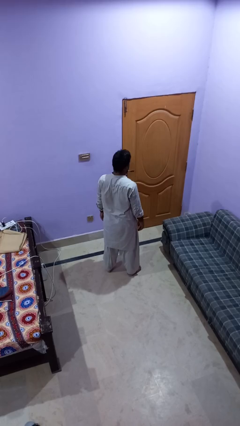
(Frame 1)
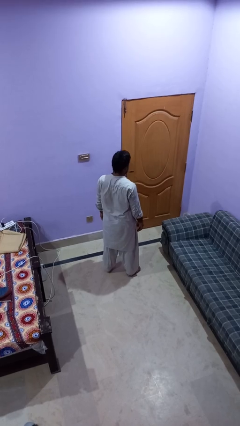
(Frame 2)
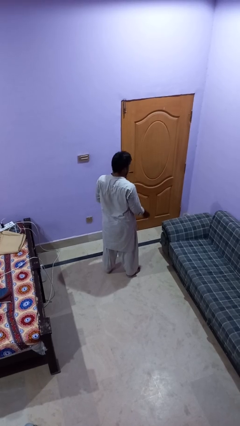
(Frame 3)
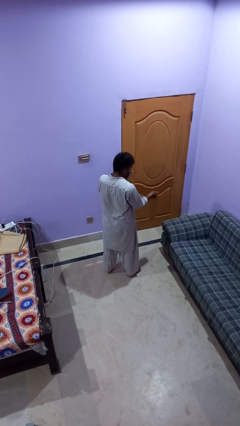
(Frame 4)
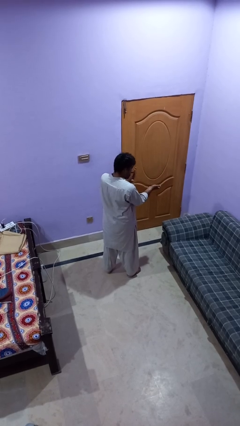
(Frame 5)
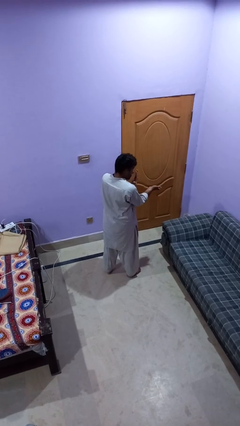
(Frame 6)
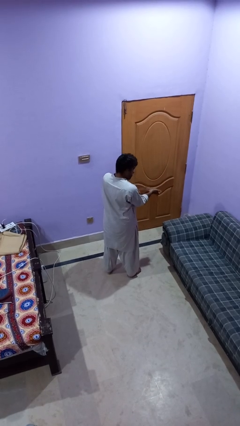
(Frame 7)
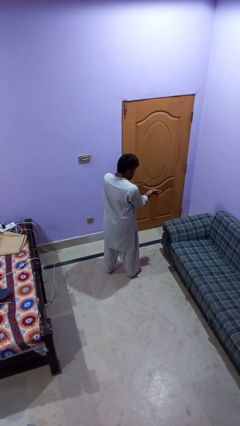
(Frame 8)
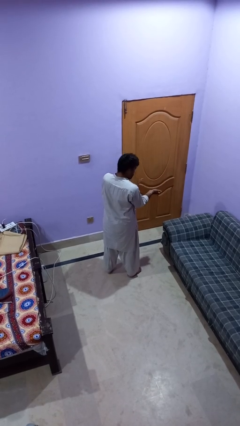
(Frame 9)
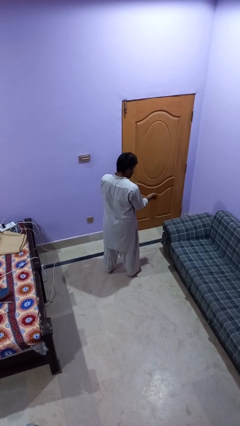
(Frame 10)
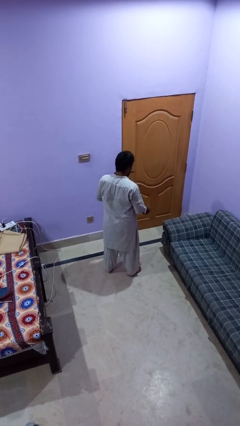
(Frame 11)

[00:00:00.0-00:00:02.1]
person swats bug

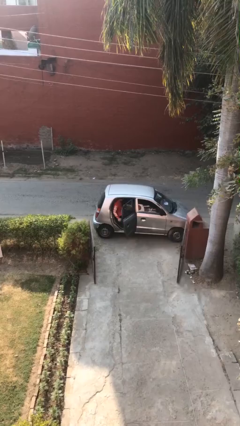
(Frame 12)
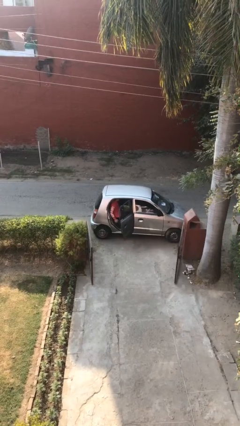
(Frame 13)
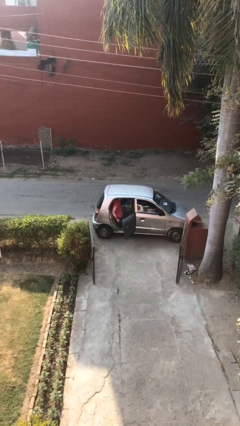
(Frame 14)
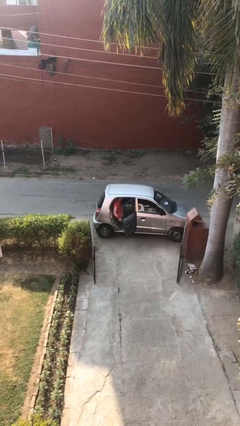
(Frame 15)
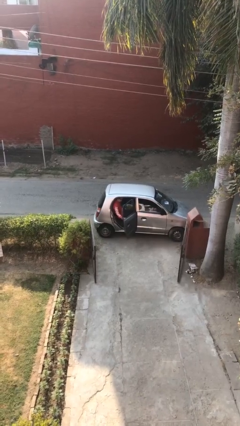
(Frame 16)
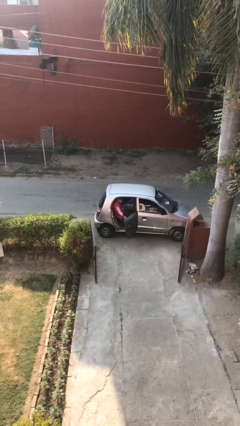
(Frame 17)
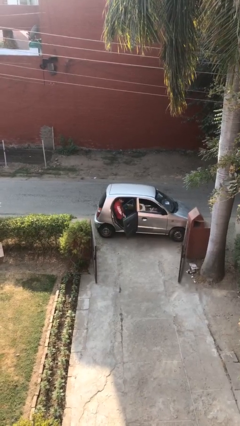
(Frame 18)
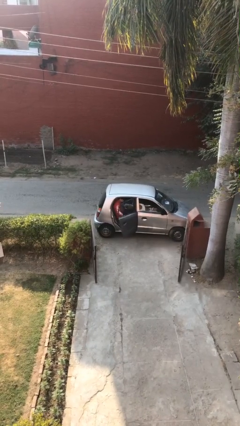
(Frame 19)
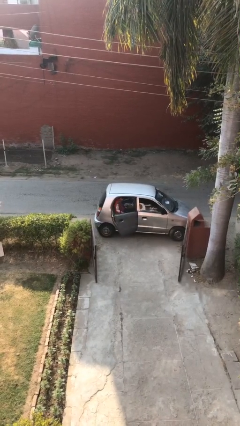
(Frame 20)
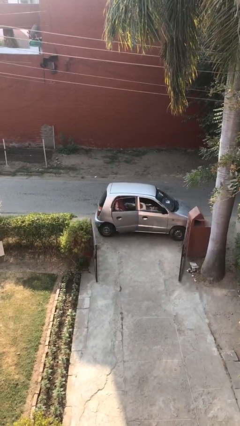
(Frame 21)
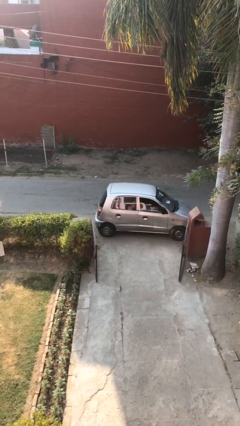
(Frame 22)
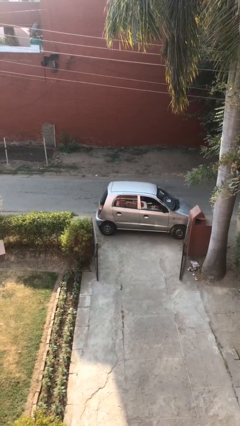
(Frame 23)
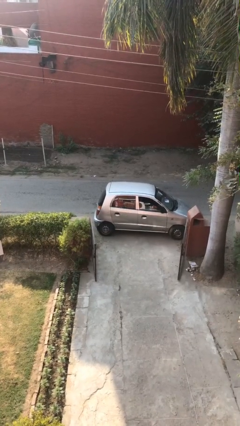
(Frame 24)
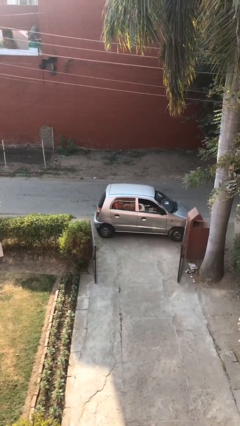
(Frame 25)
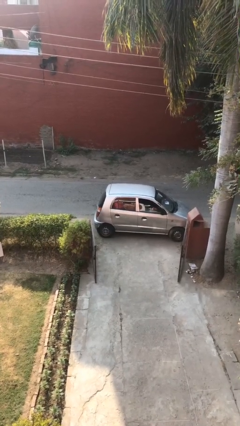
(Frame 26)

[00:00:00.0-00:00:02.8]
person closes car door

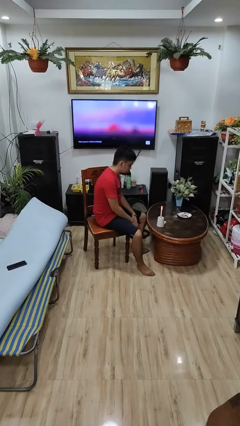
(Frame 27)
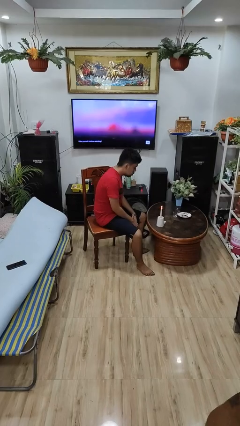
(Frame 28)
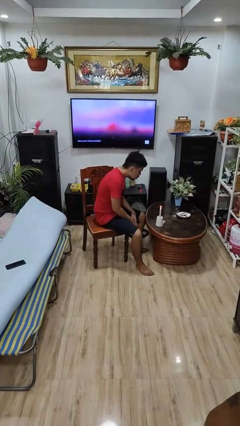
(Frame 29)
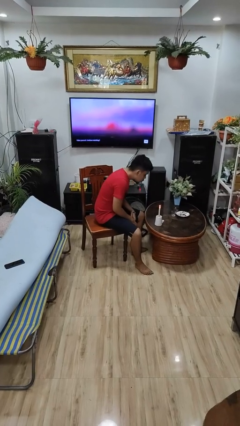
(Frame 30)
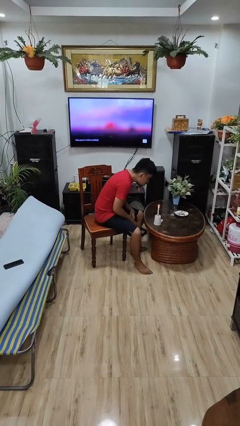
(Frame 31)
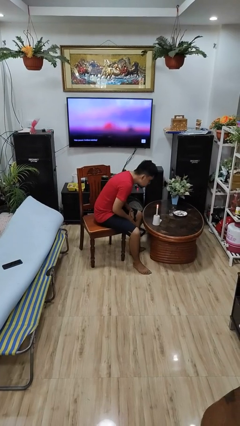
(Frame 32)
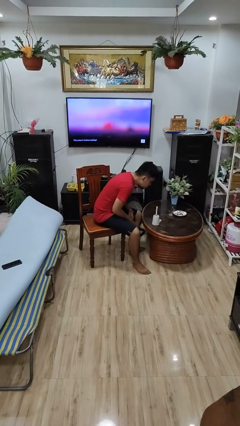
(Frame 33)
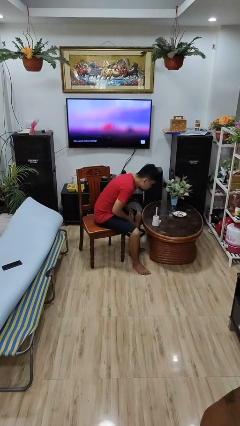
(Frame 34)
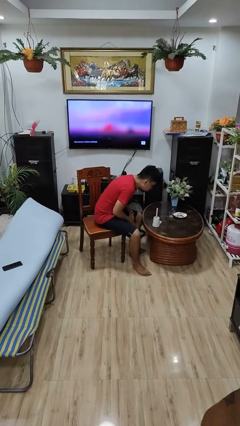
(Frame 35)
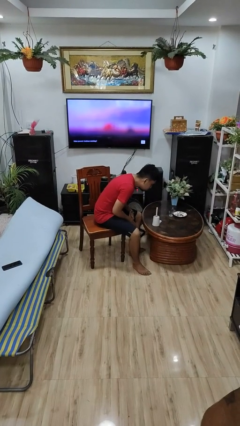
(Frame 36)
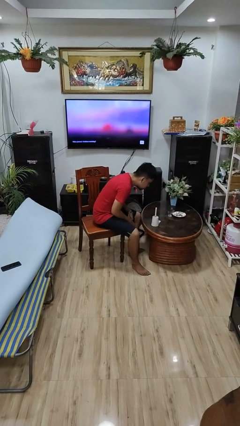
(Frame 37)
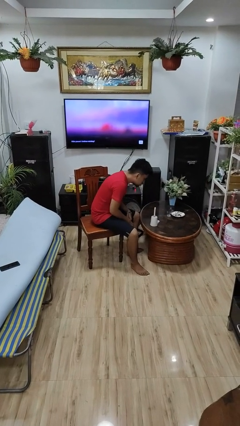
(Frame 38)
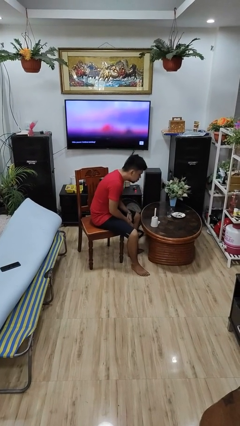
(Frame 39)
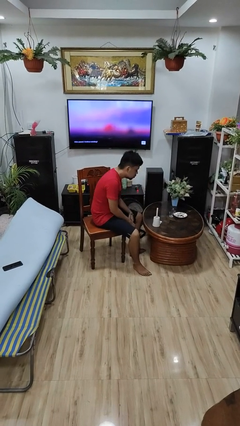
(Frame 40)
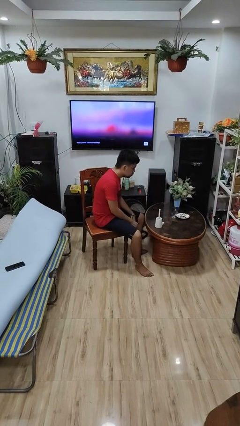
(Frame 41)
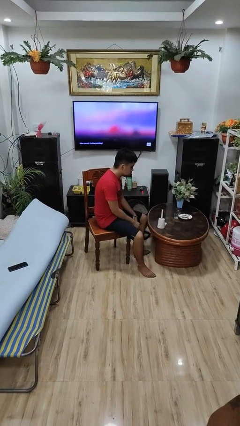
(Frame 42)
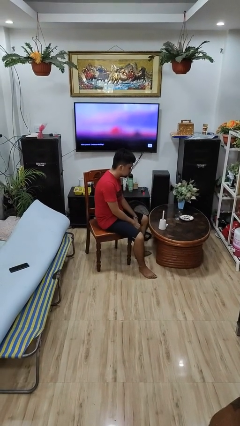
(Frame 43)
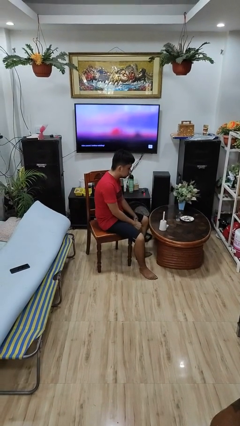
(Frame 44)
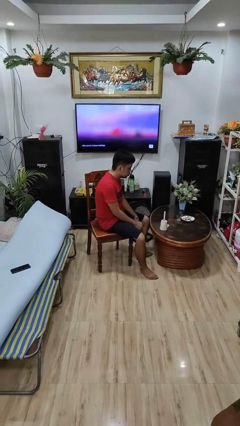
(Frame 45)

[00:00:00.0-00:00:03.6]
person extinguishes candle

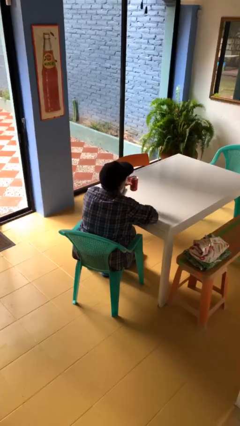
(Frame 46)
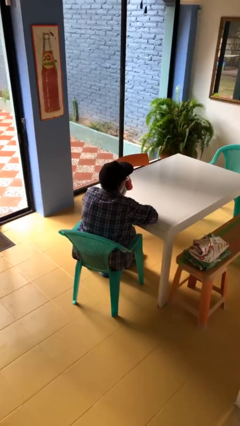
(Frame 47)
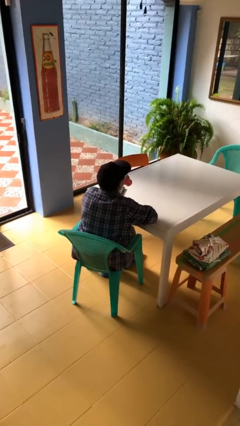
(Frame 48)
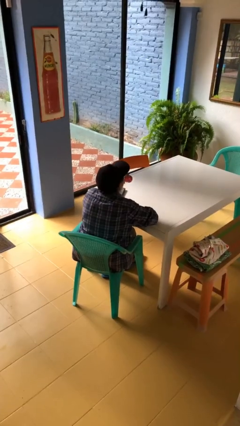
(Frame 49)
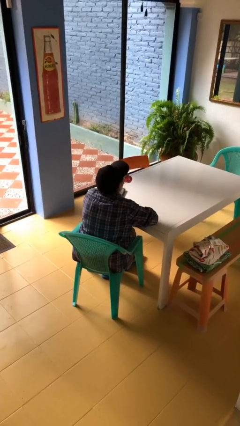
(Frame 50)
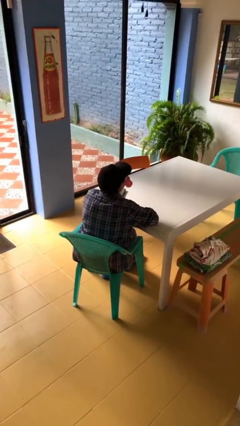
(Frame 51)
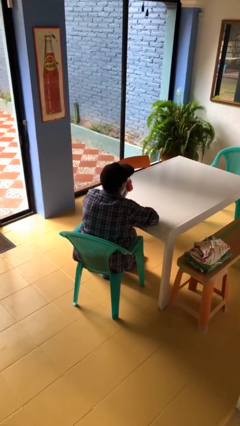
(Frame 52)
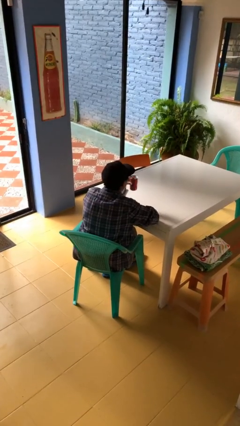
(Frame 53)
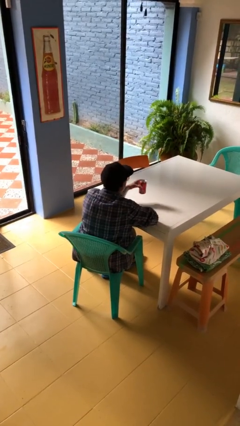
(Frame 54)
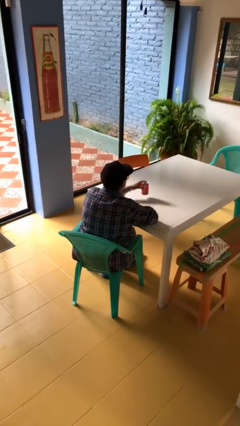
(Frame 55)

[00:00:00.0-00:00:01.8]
person drinks from beverage can

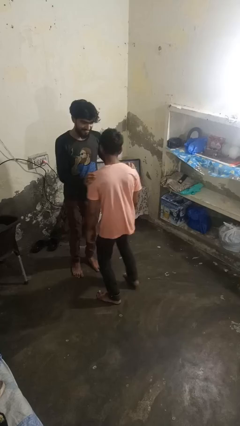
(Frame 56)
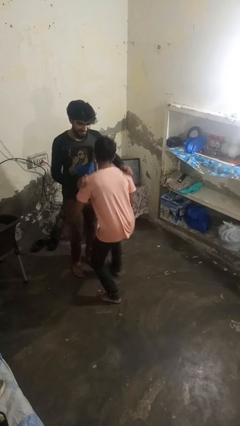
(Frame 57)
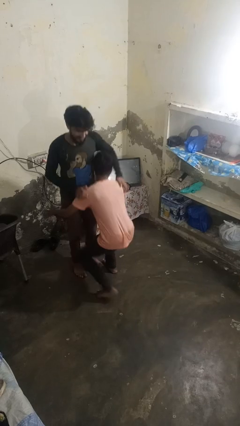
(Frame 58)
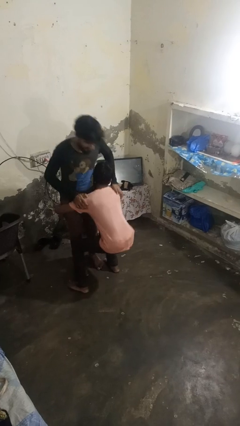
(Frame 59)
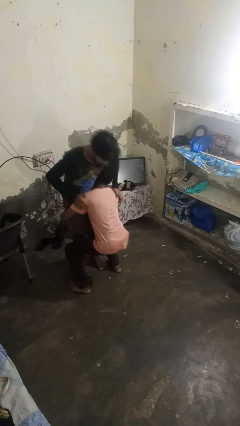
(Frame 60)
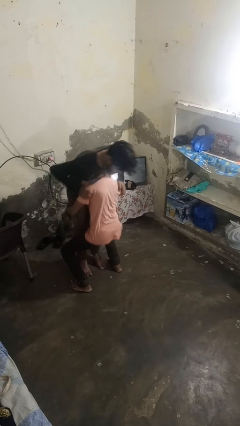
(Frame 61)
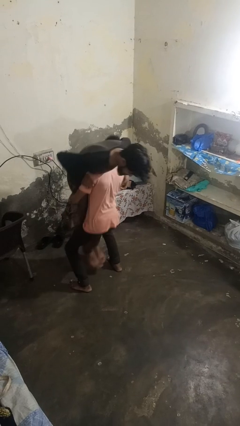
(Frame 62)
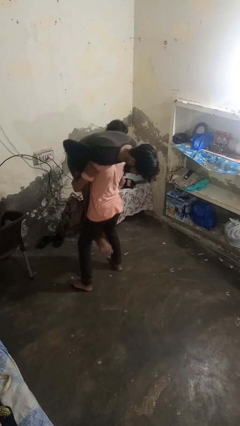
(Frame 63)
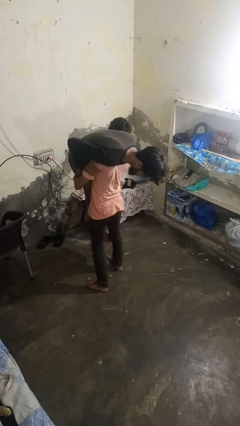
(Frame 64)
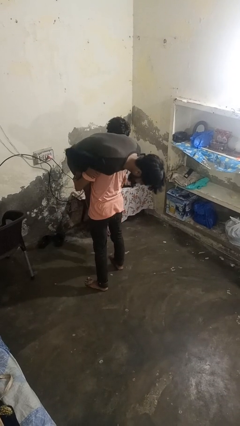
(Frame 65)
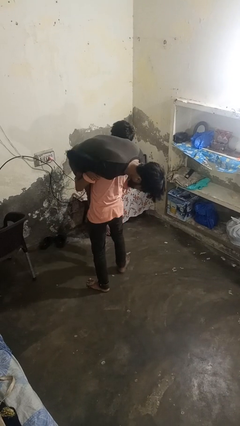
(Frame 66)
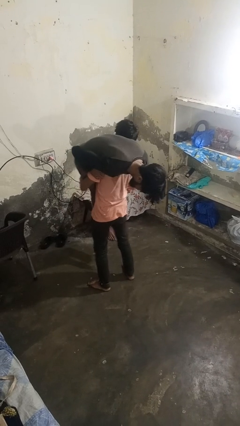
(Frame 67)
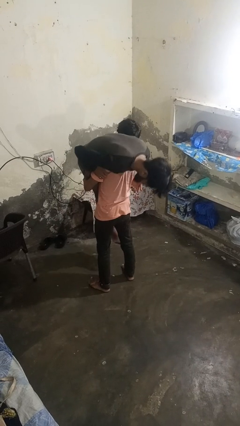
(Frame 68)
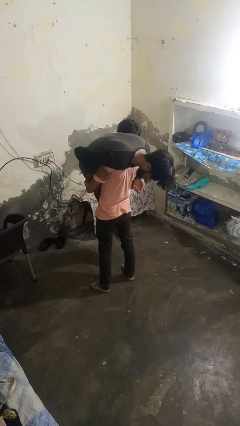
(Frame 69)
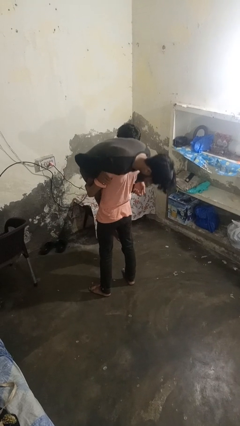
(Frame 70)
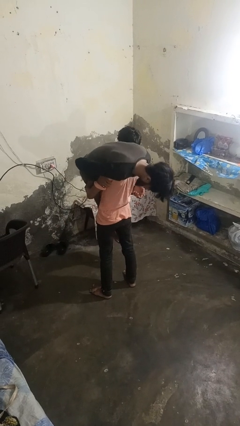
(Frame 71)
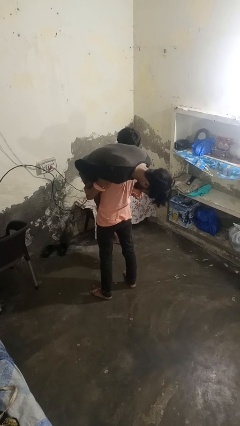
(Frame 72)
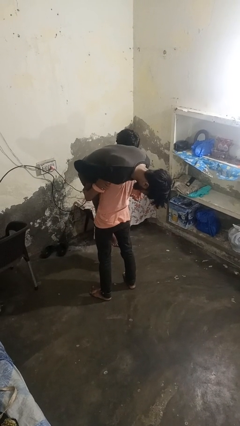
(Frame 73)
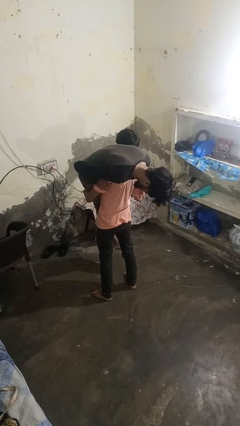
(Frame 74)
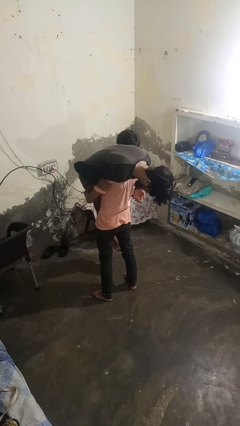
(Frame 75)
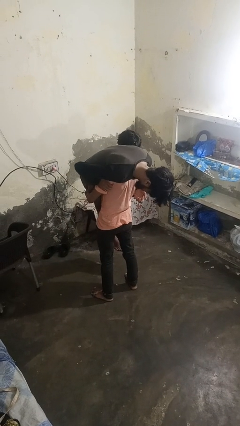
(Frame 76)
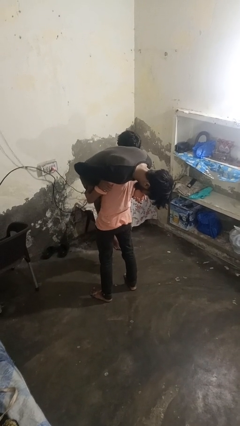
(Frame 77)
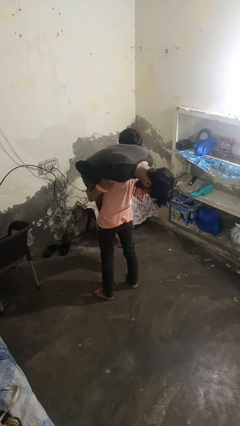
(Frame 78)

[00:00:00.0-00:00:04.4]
person carries person over shoulder

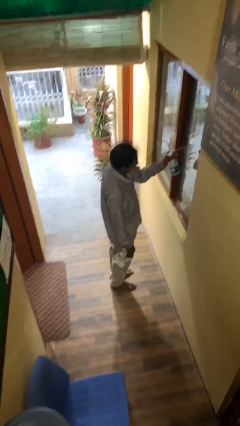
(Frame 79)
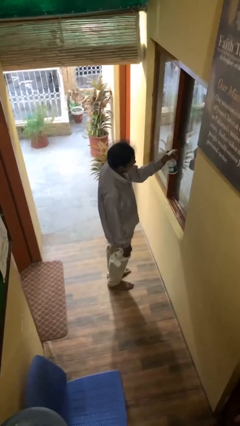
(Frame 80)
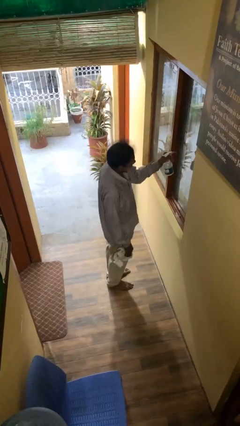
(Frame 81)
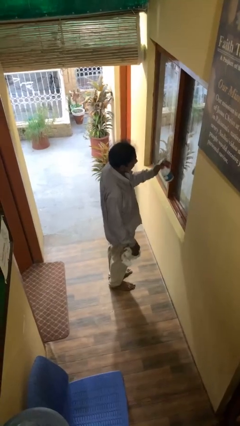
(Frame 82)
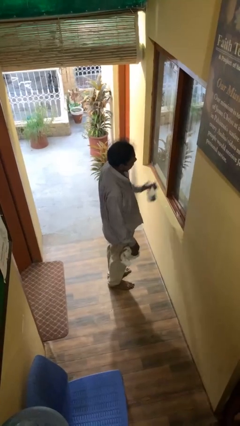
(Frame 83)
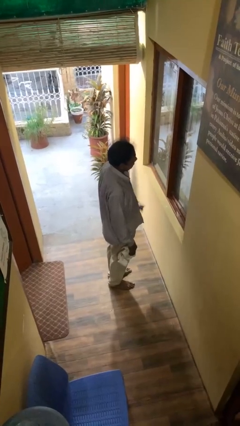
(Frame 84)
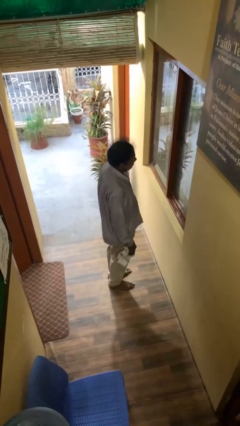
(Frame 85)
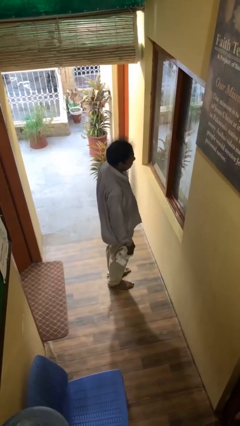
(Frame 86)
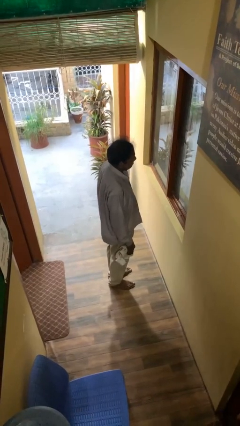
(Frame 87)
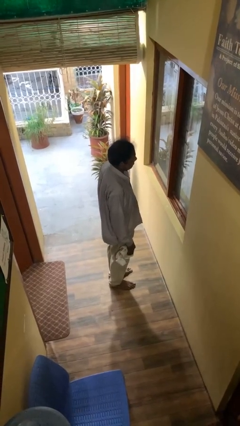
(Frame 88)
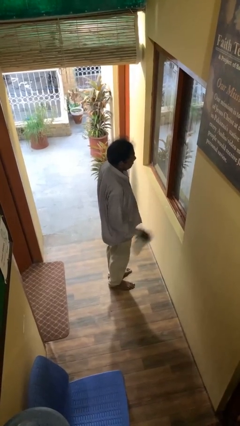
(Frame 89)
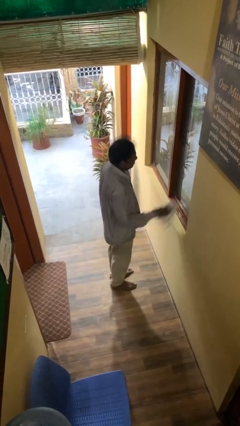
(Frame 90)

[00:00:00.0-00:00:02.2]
person sprays from bottle

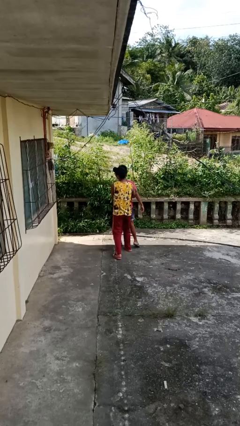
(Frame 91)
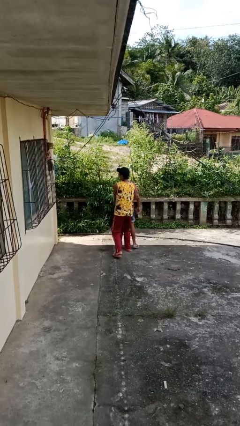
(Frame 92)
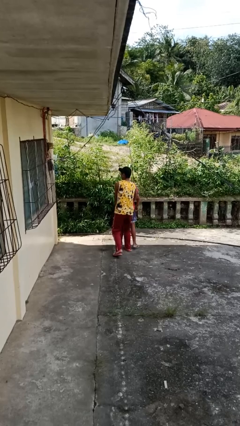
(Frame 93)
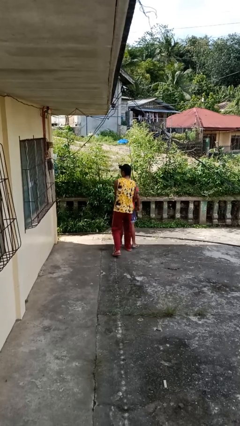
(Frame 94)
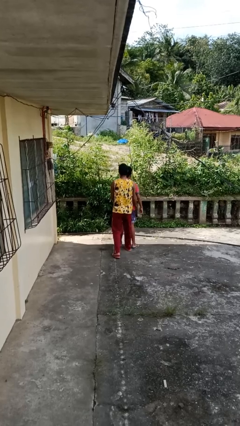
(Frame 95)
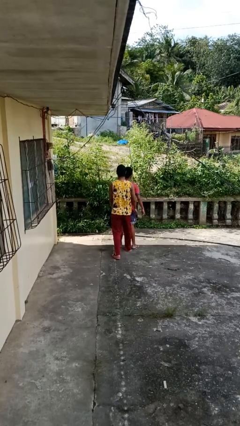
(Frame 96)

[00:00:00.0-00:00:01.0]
person puts down person
